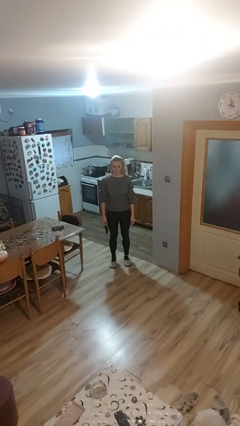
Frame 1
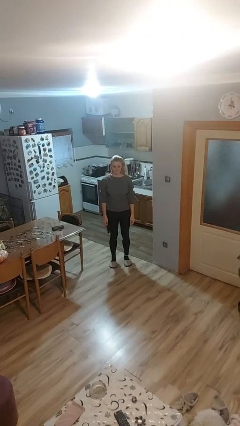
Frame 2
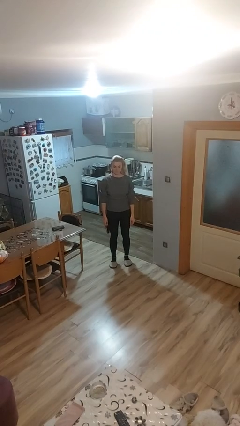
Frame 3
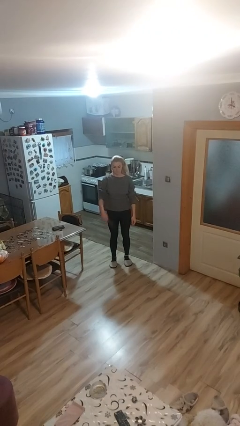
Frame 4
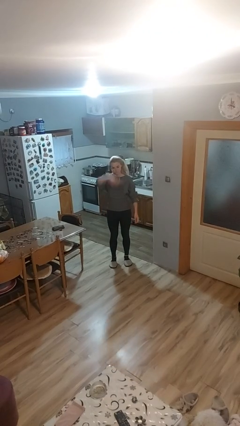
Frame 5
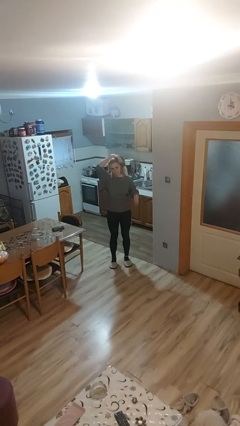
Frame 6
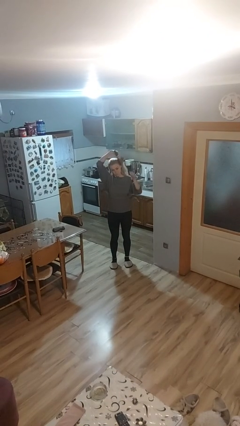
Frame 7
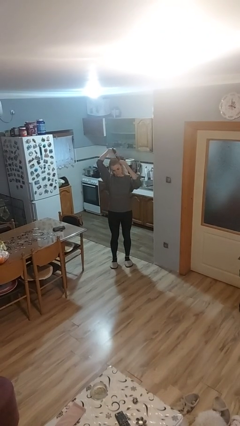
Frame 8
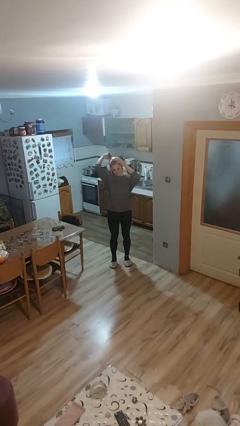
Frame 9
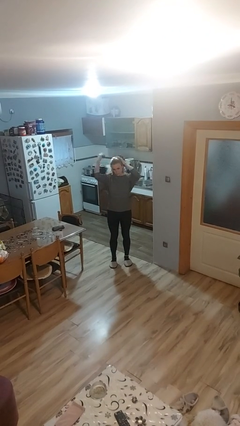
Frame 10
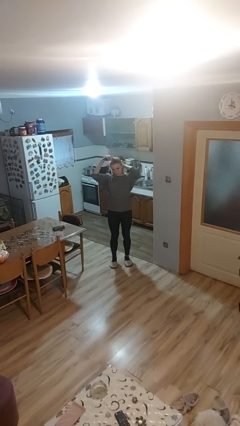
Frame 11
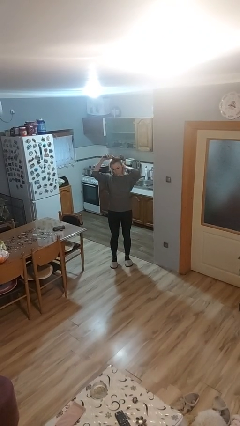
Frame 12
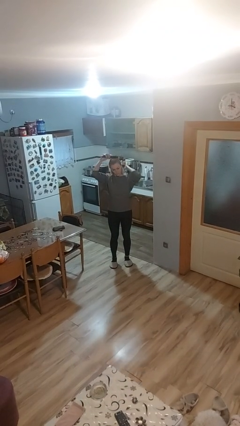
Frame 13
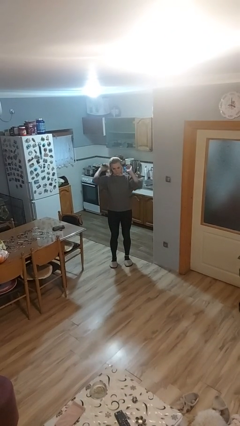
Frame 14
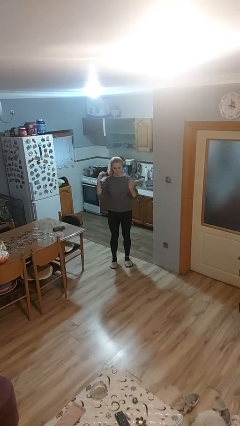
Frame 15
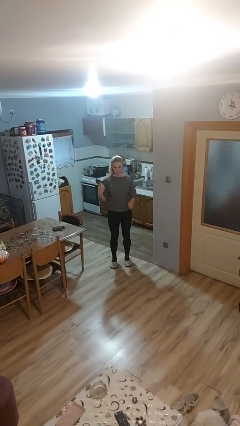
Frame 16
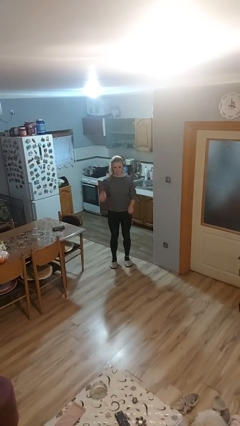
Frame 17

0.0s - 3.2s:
person brushes hair

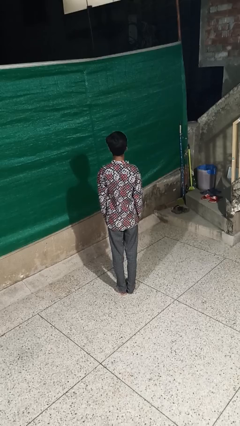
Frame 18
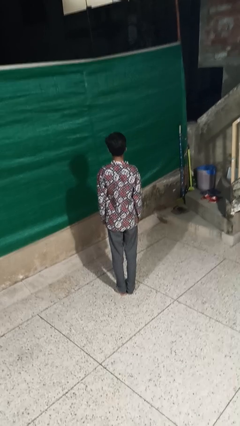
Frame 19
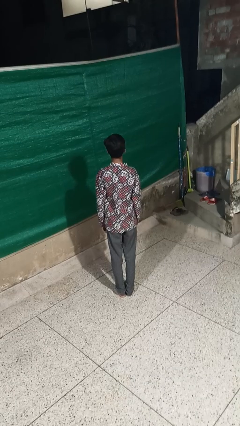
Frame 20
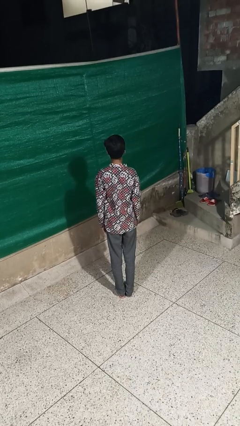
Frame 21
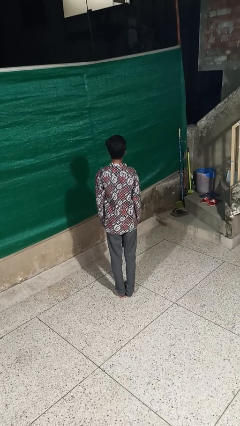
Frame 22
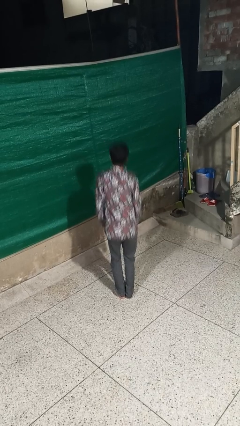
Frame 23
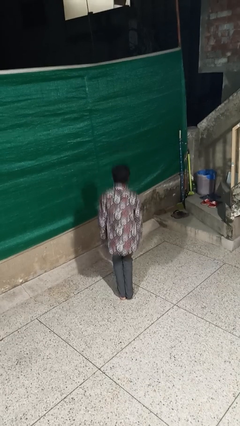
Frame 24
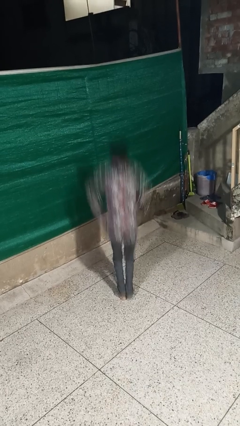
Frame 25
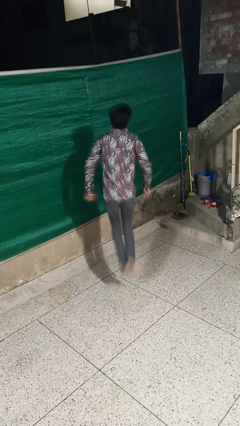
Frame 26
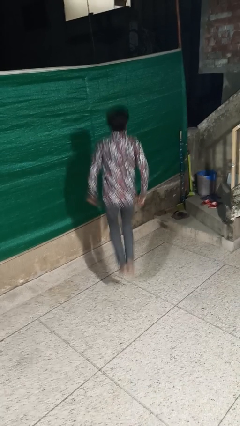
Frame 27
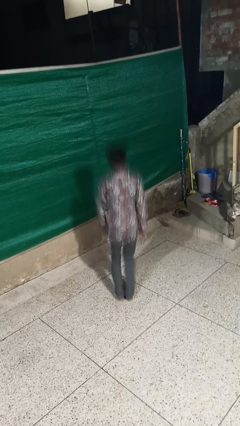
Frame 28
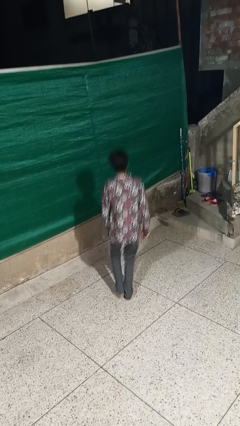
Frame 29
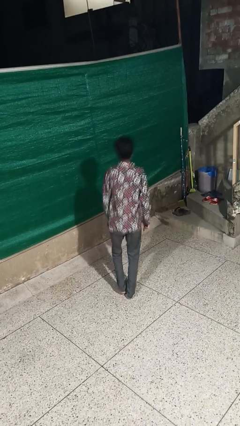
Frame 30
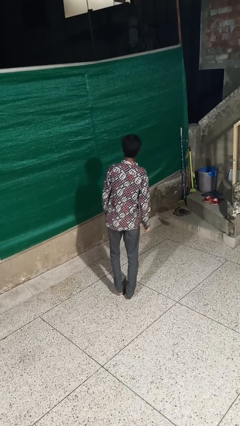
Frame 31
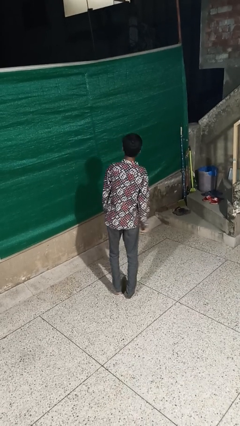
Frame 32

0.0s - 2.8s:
person jumps

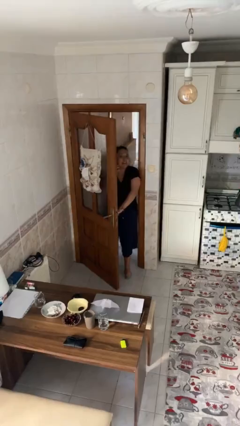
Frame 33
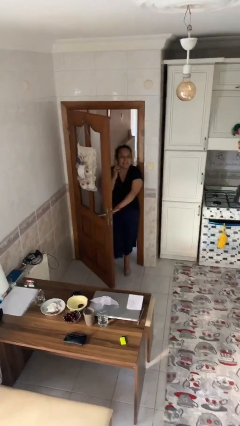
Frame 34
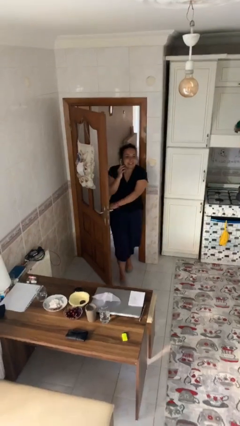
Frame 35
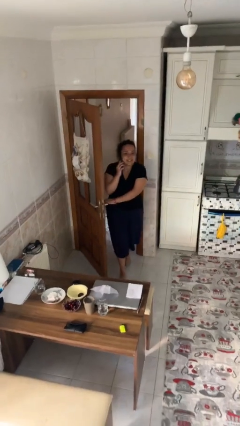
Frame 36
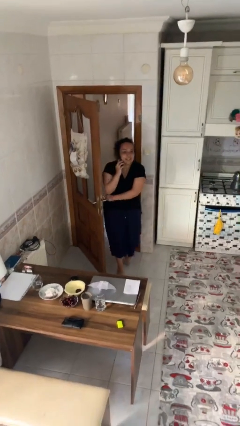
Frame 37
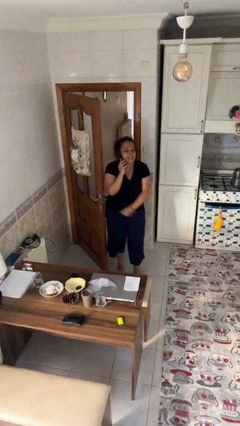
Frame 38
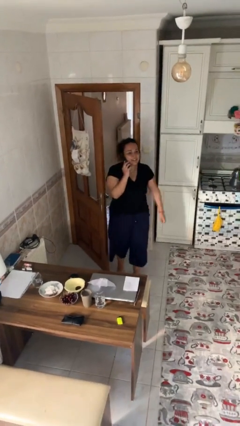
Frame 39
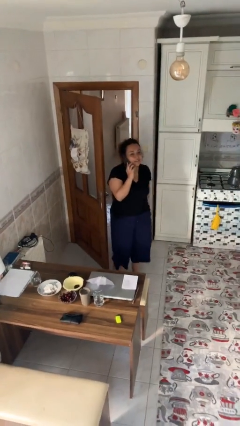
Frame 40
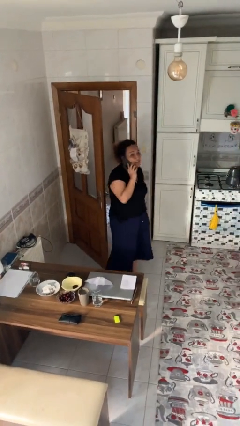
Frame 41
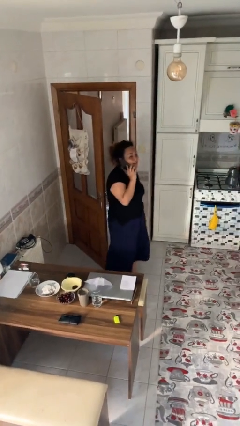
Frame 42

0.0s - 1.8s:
person enters scene through structure

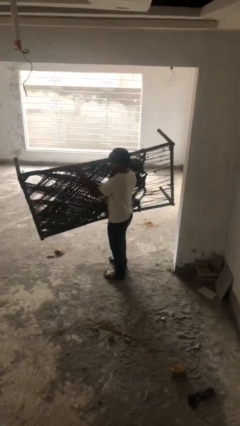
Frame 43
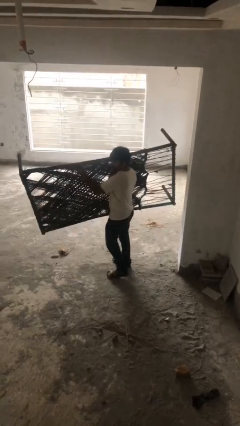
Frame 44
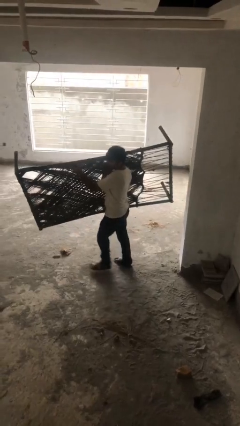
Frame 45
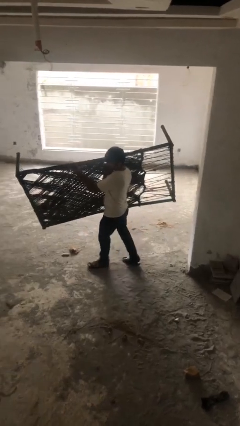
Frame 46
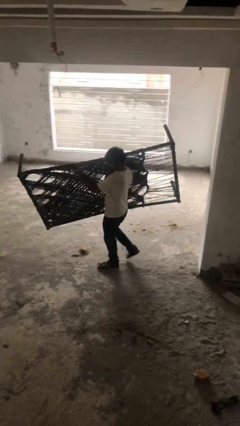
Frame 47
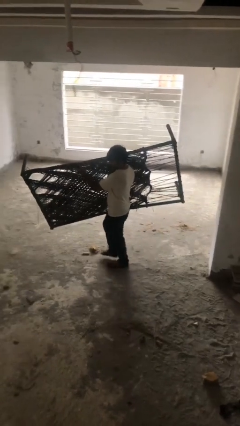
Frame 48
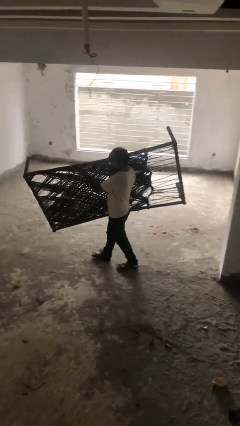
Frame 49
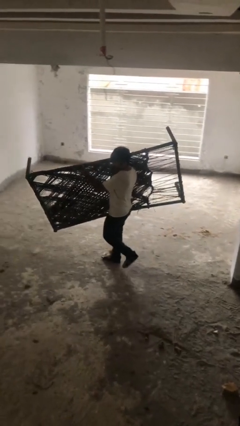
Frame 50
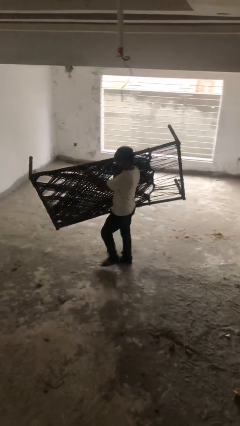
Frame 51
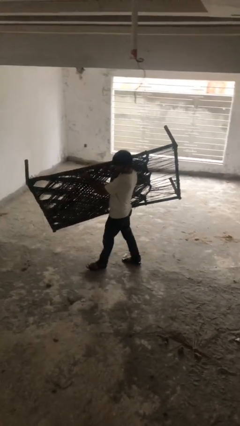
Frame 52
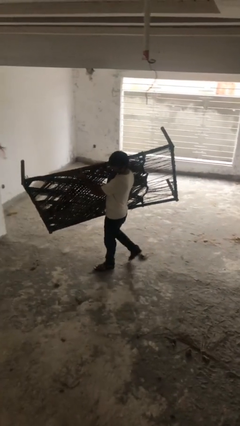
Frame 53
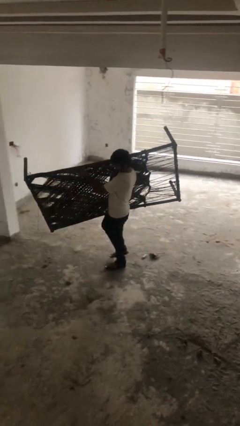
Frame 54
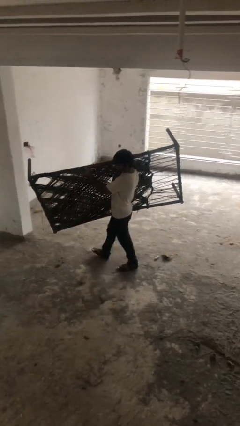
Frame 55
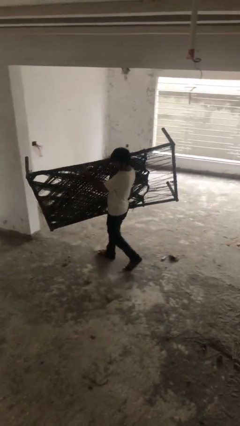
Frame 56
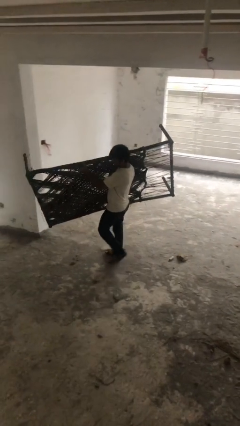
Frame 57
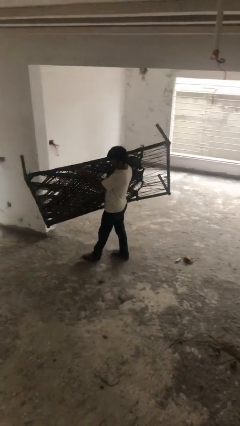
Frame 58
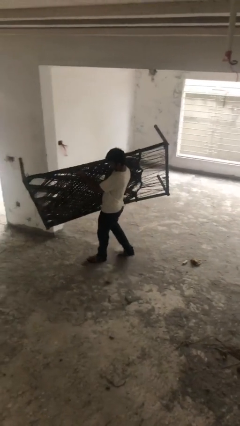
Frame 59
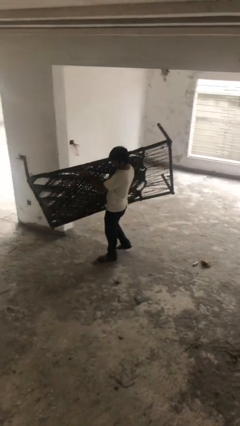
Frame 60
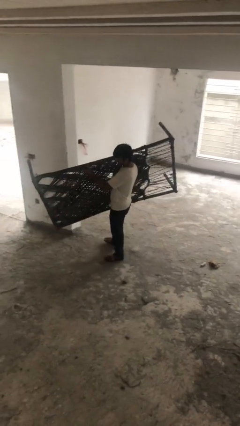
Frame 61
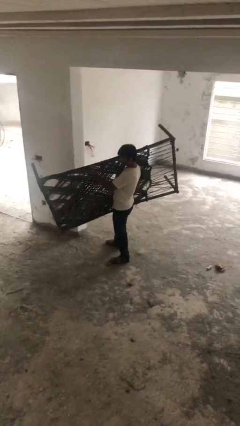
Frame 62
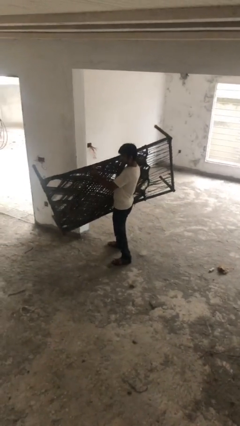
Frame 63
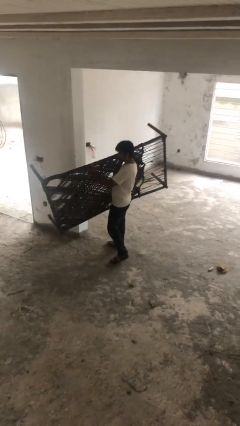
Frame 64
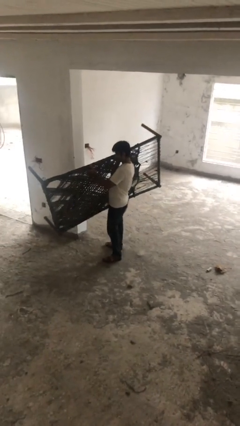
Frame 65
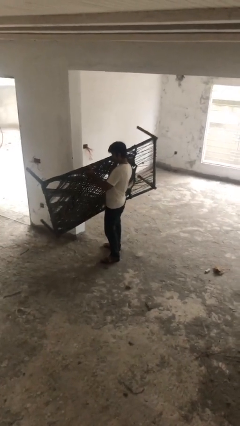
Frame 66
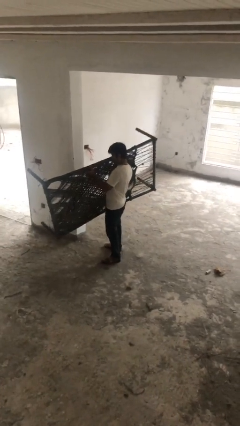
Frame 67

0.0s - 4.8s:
person carries heavy object

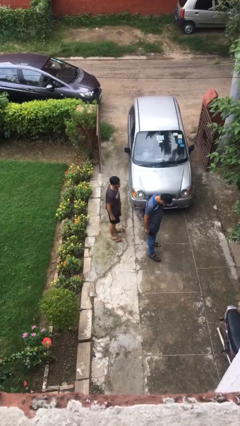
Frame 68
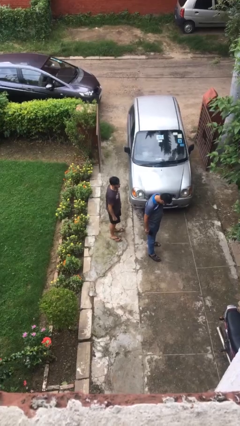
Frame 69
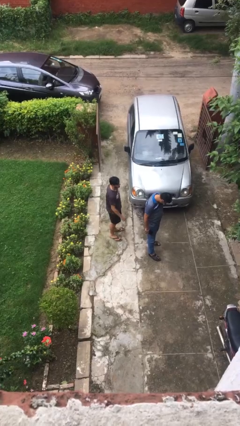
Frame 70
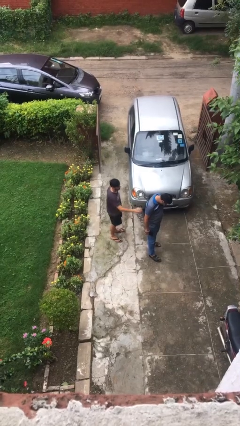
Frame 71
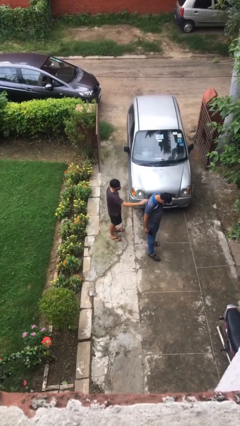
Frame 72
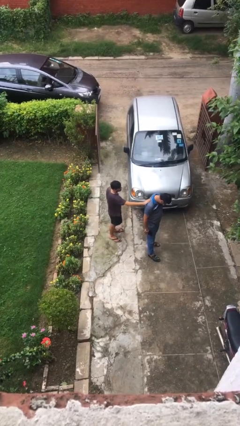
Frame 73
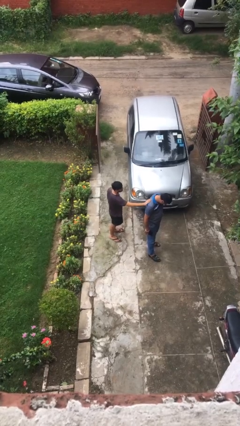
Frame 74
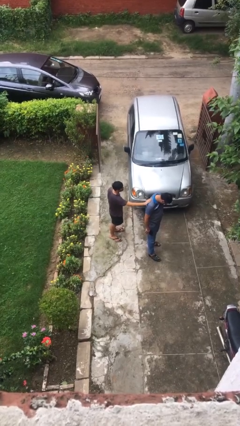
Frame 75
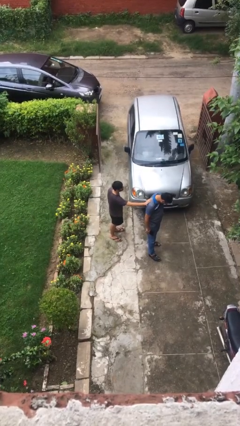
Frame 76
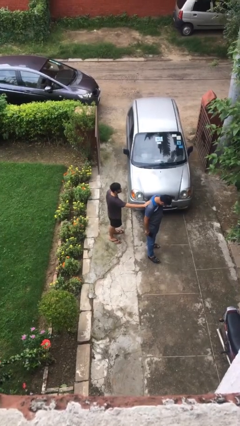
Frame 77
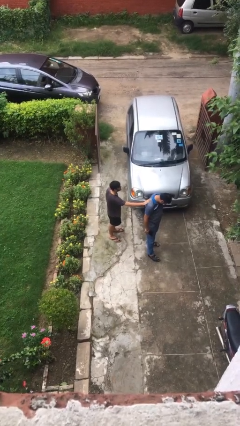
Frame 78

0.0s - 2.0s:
person touches back of person

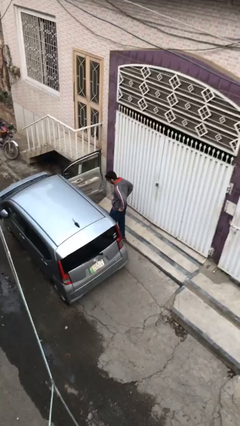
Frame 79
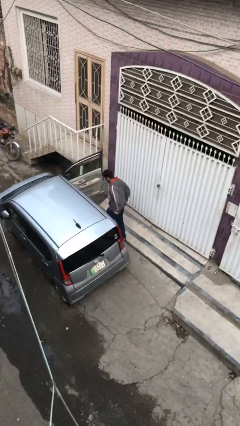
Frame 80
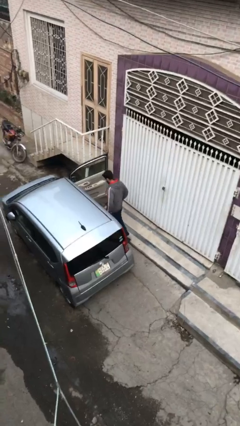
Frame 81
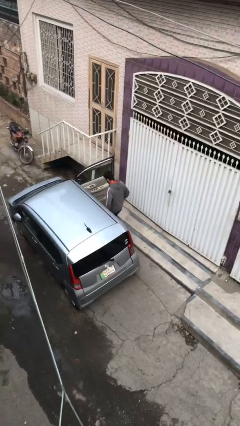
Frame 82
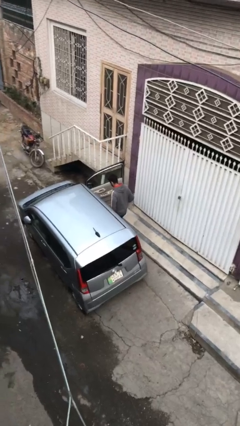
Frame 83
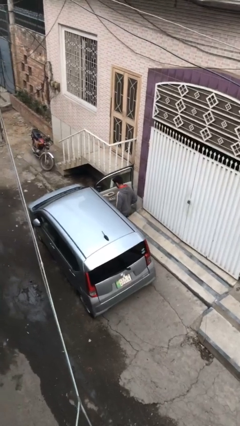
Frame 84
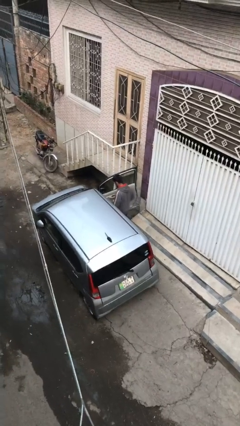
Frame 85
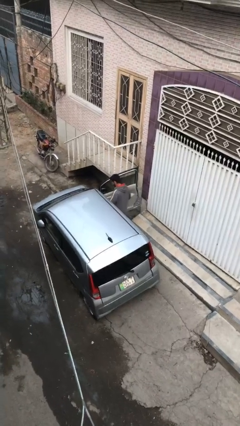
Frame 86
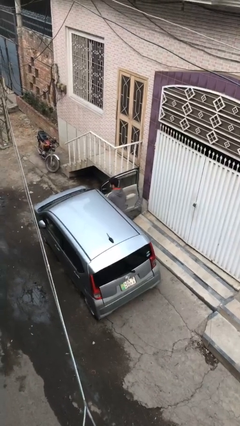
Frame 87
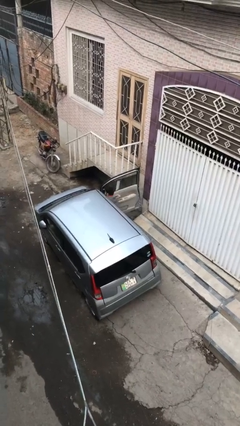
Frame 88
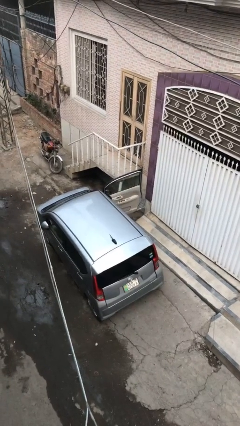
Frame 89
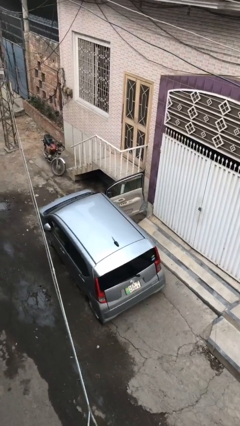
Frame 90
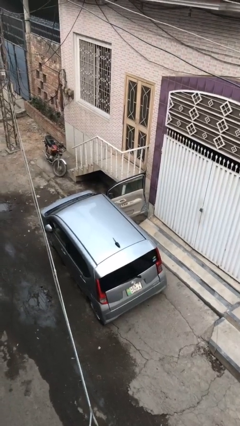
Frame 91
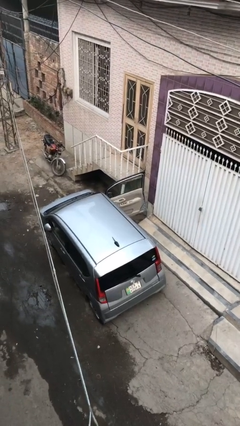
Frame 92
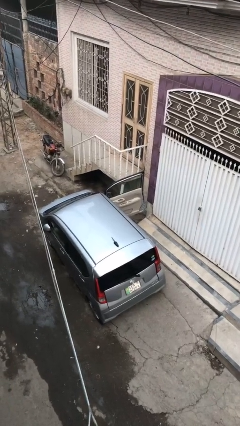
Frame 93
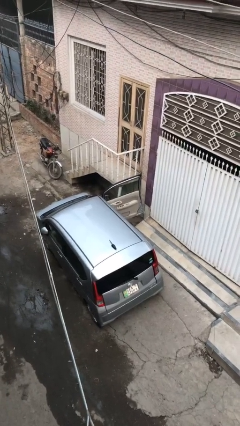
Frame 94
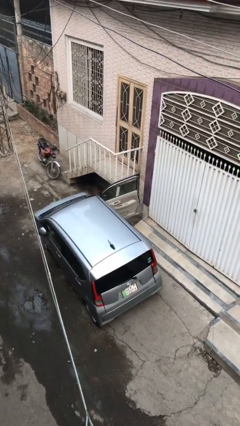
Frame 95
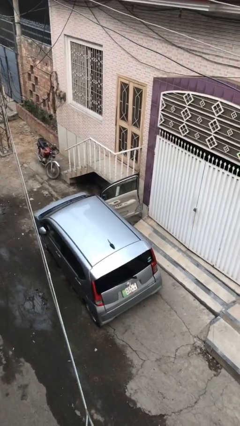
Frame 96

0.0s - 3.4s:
person enters car
